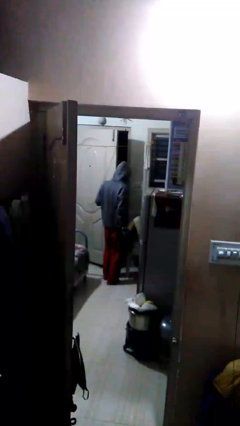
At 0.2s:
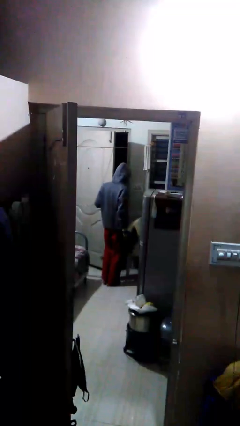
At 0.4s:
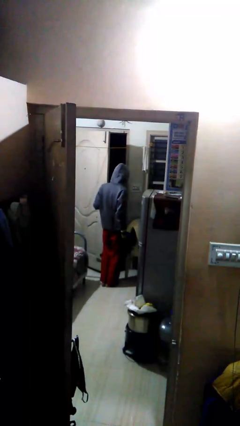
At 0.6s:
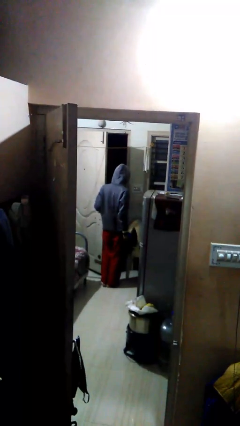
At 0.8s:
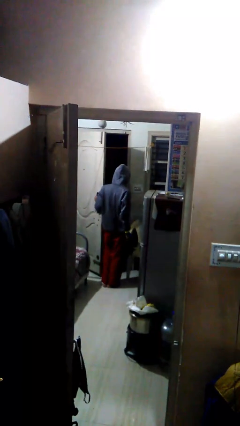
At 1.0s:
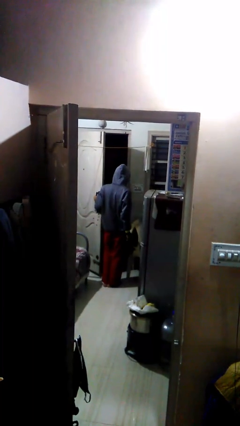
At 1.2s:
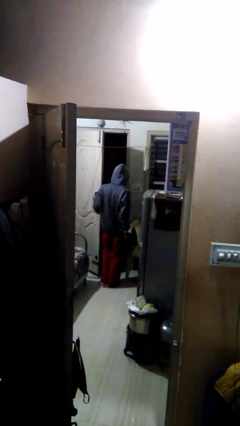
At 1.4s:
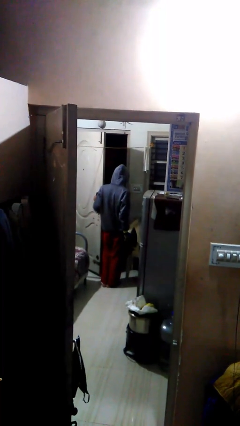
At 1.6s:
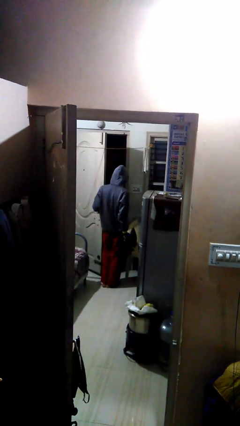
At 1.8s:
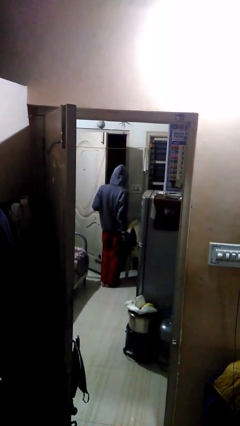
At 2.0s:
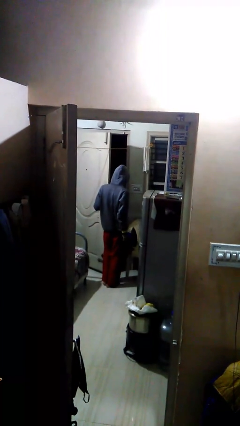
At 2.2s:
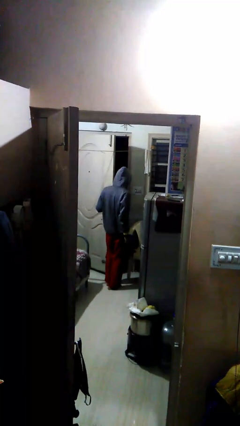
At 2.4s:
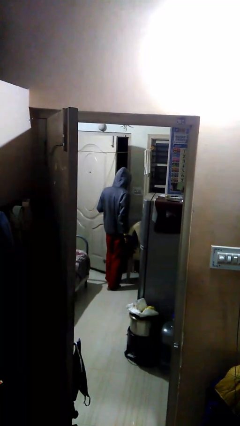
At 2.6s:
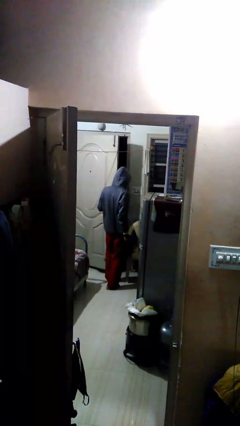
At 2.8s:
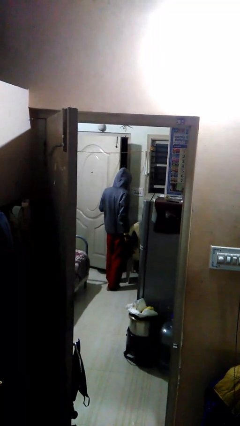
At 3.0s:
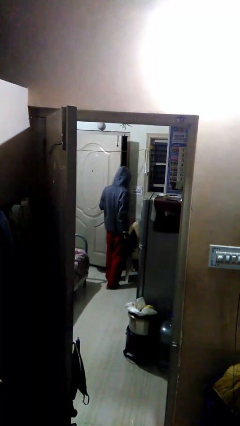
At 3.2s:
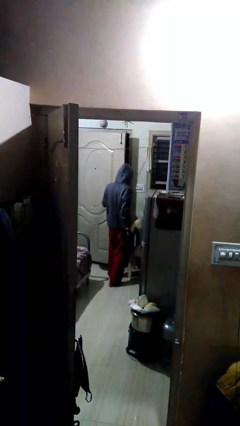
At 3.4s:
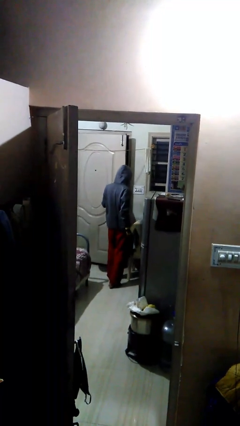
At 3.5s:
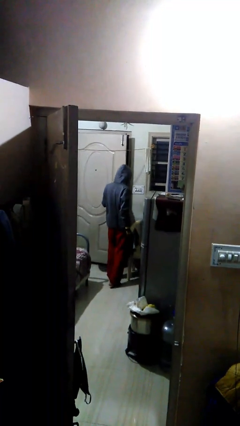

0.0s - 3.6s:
person opens facility door

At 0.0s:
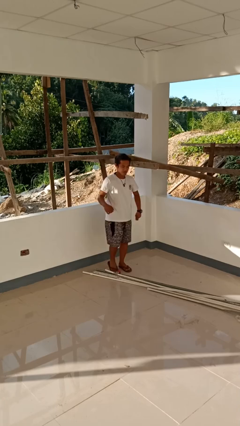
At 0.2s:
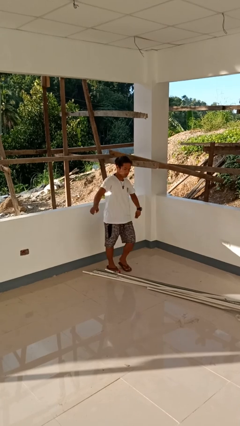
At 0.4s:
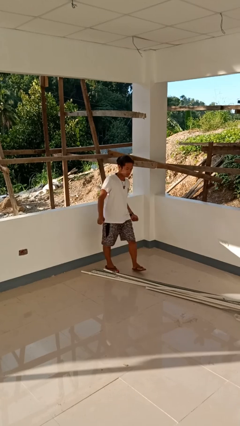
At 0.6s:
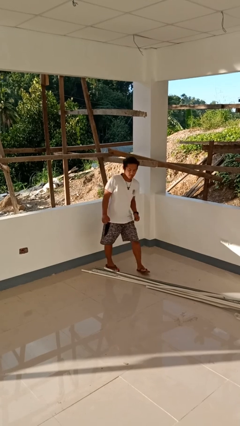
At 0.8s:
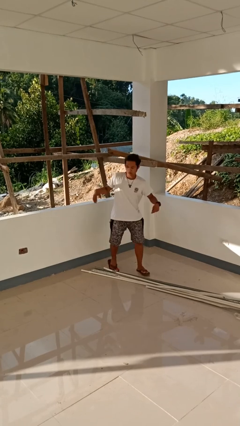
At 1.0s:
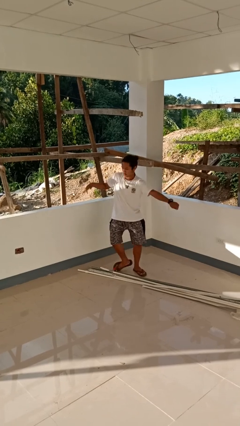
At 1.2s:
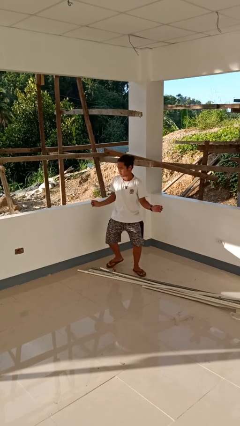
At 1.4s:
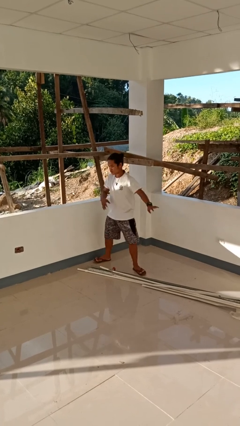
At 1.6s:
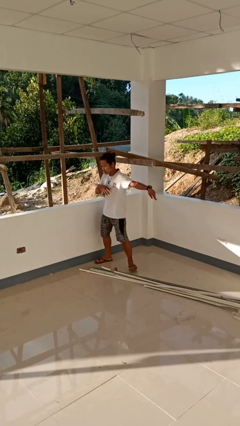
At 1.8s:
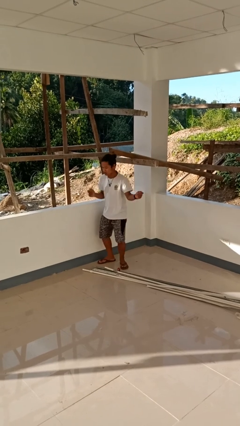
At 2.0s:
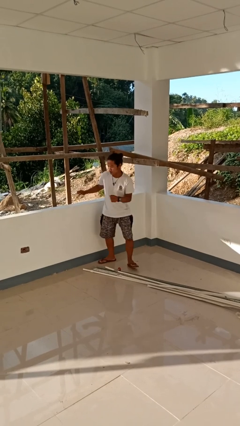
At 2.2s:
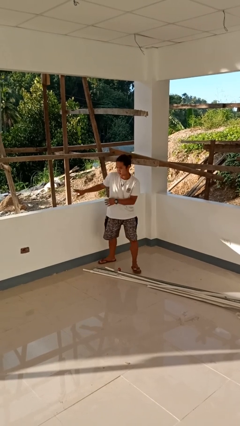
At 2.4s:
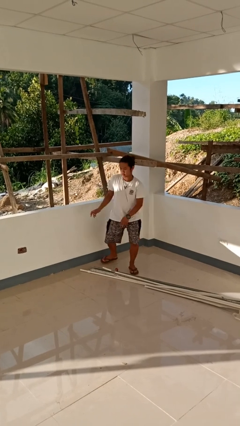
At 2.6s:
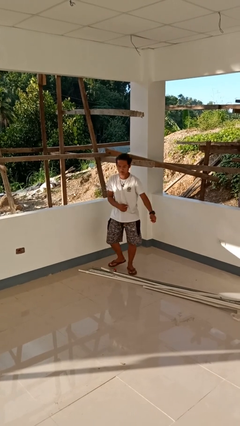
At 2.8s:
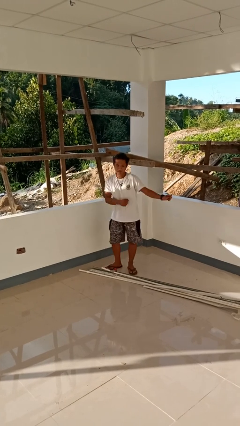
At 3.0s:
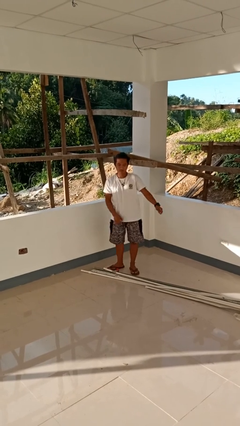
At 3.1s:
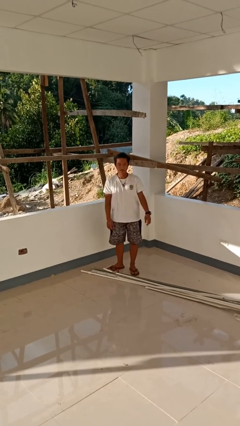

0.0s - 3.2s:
person dances in place

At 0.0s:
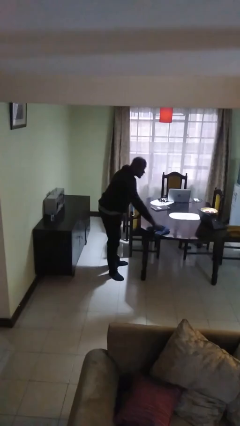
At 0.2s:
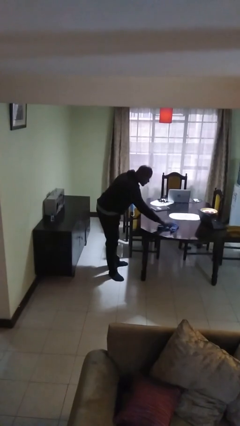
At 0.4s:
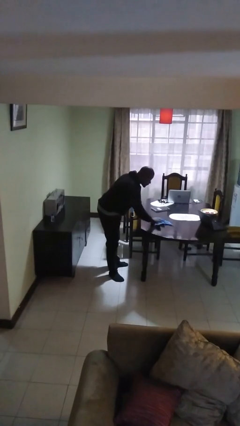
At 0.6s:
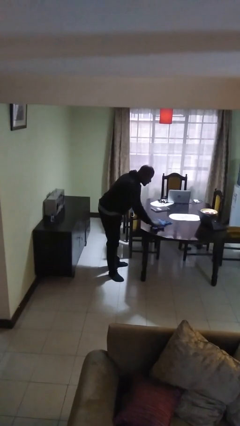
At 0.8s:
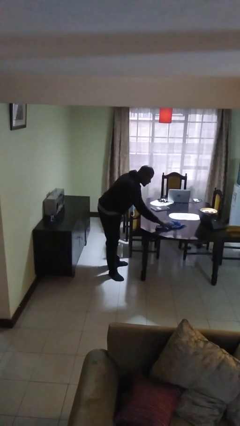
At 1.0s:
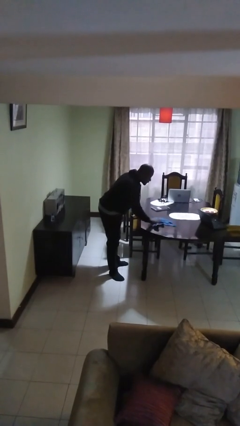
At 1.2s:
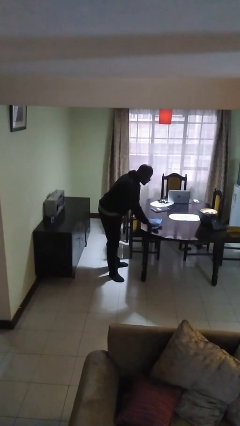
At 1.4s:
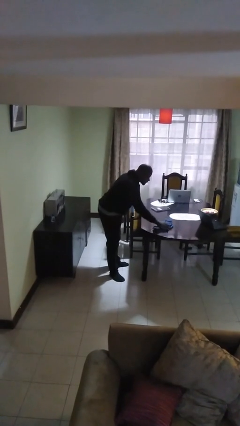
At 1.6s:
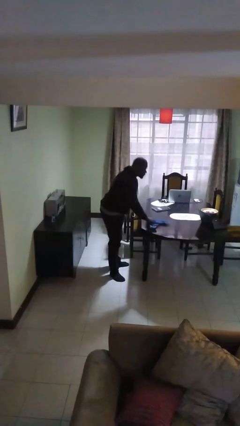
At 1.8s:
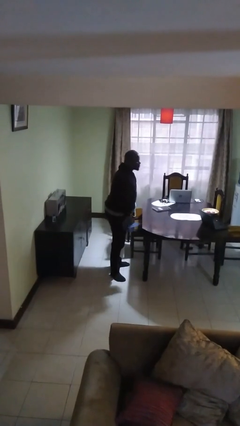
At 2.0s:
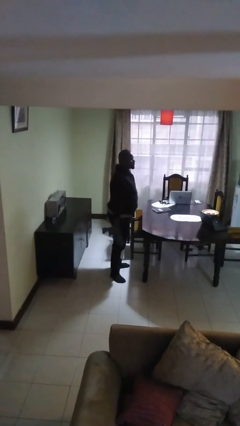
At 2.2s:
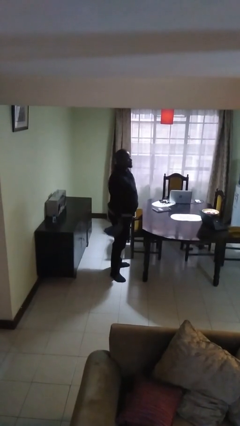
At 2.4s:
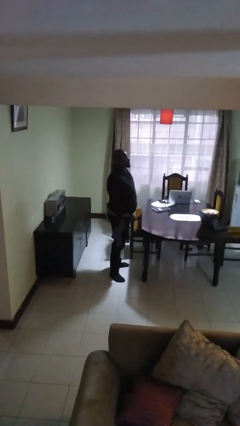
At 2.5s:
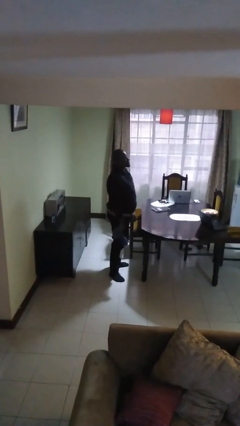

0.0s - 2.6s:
person cleans table with rag

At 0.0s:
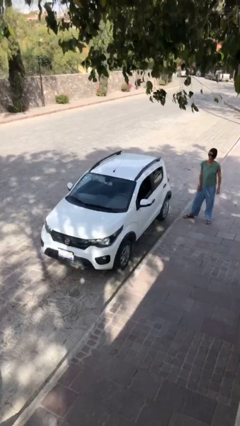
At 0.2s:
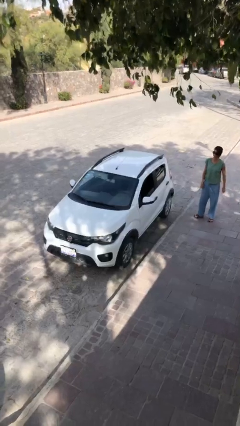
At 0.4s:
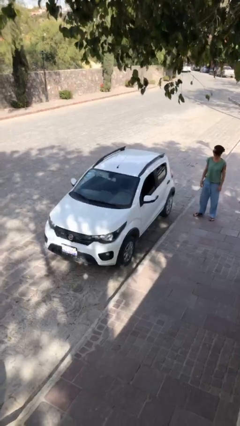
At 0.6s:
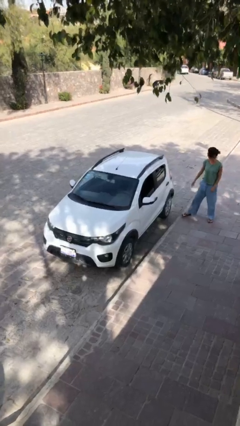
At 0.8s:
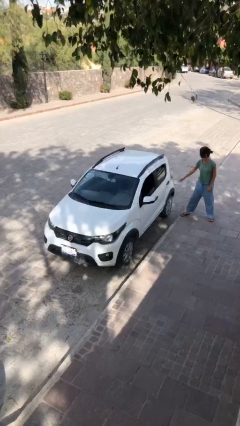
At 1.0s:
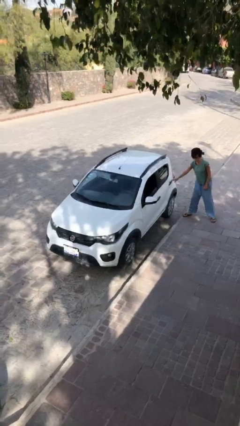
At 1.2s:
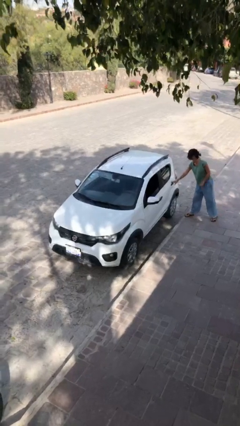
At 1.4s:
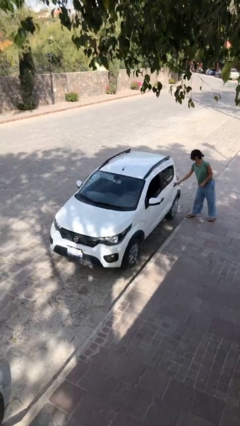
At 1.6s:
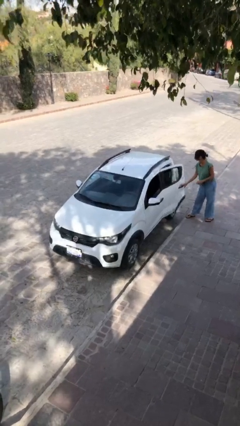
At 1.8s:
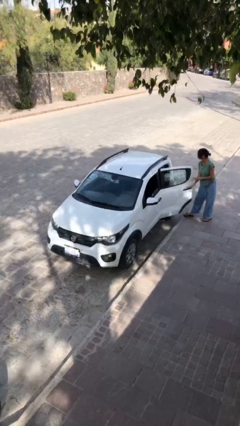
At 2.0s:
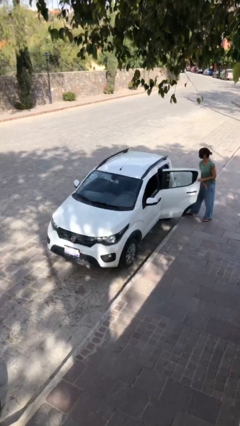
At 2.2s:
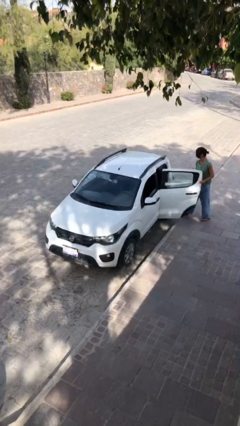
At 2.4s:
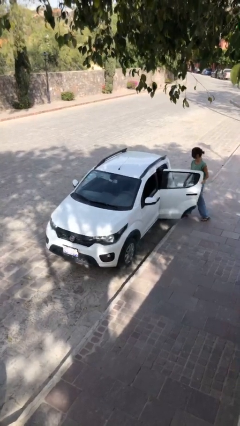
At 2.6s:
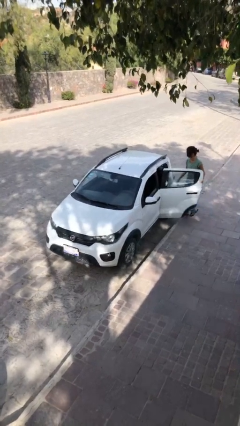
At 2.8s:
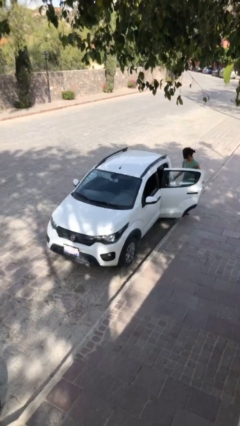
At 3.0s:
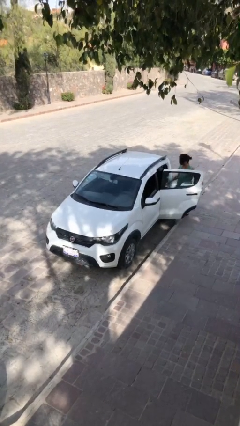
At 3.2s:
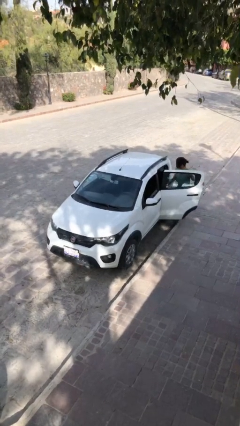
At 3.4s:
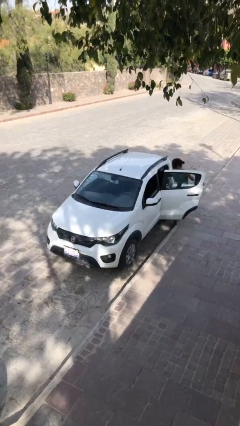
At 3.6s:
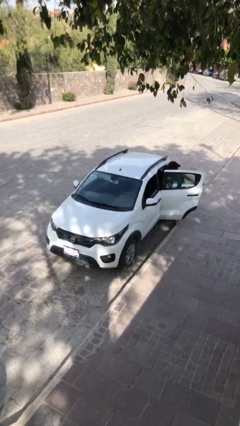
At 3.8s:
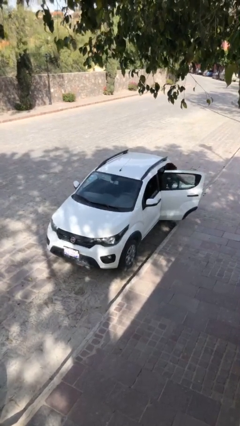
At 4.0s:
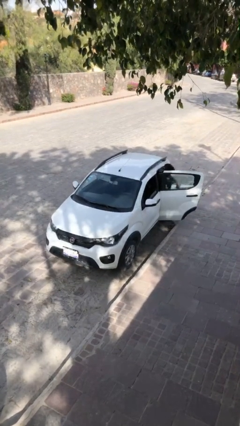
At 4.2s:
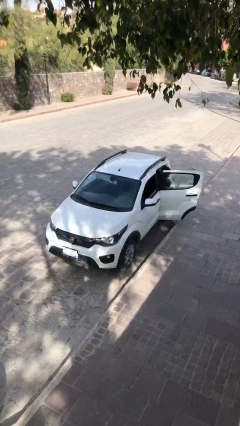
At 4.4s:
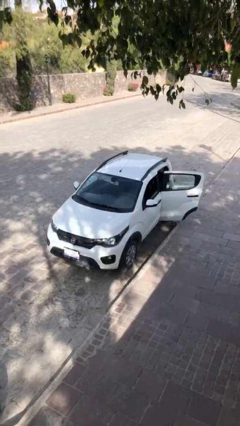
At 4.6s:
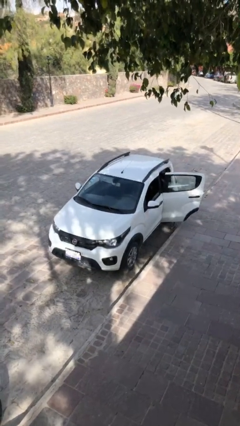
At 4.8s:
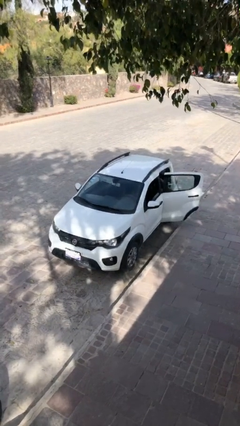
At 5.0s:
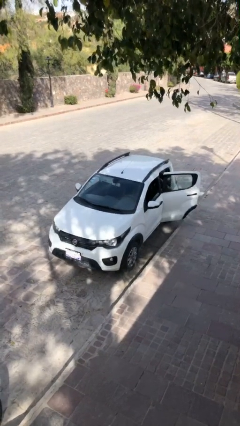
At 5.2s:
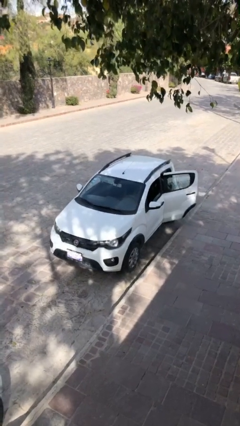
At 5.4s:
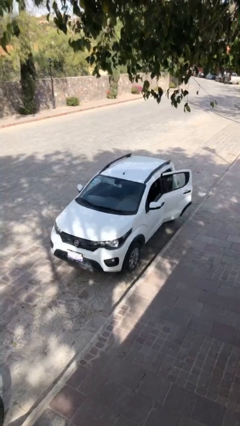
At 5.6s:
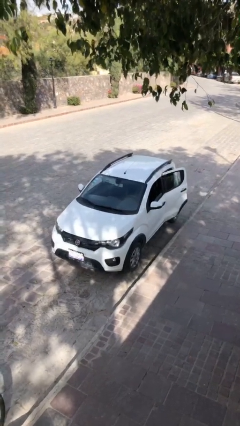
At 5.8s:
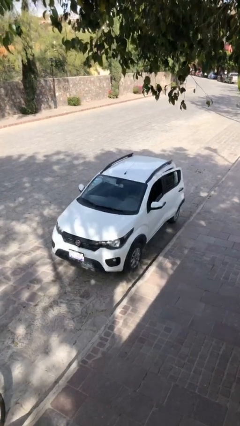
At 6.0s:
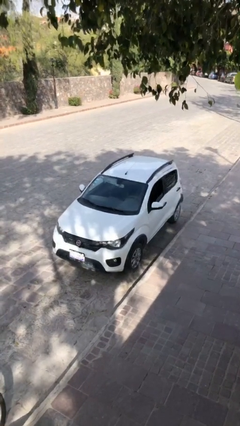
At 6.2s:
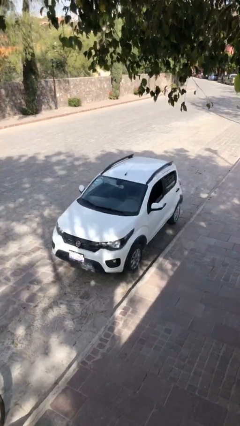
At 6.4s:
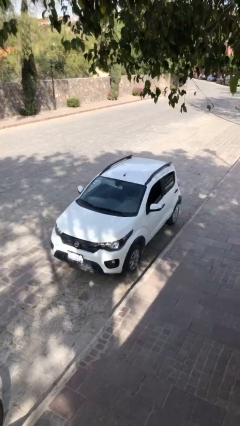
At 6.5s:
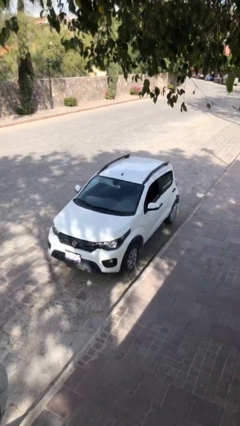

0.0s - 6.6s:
car picks up person

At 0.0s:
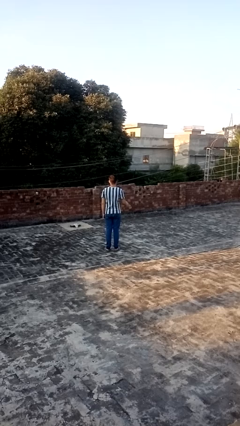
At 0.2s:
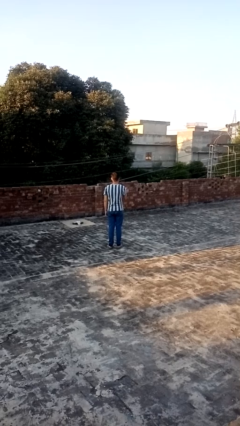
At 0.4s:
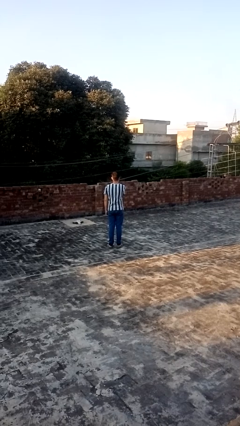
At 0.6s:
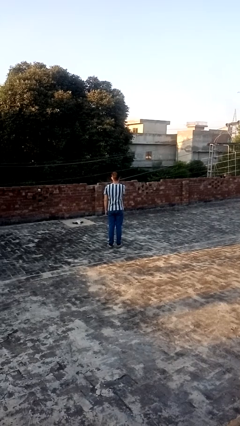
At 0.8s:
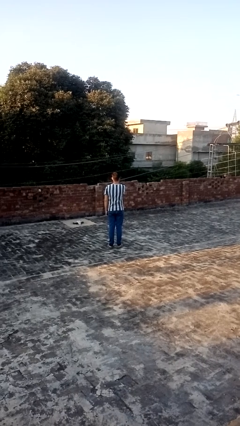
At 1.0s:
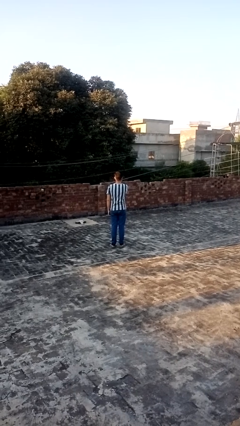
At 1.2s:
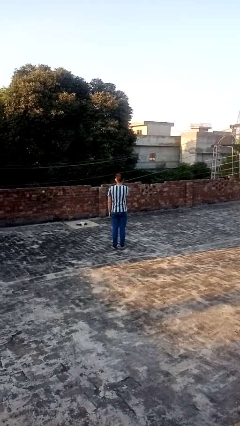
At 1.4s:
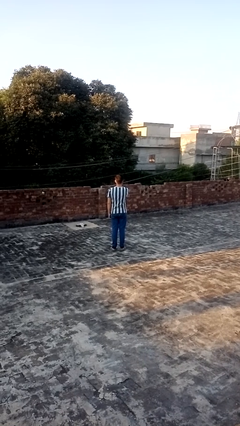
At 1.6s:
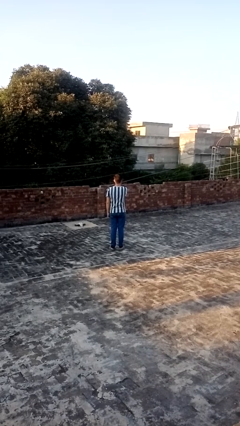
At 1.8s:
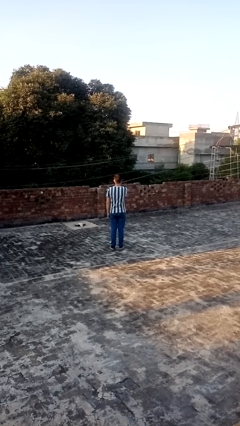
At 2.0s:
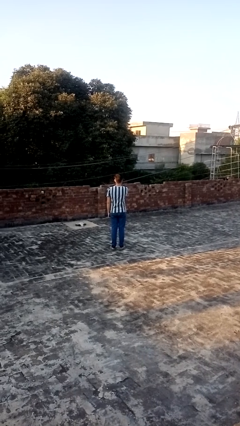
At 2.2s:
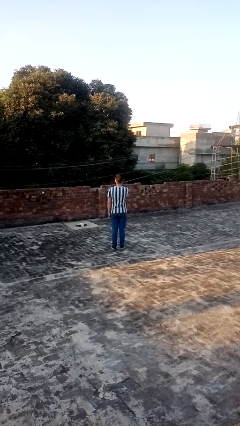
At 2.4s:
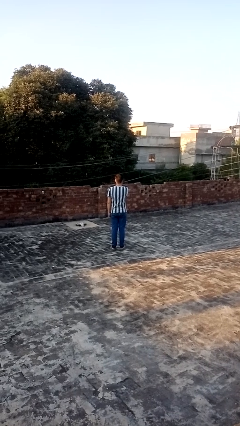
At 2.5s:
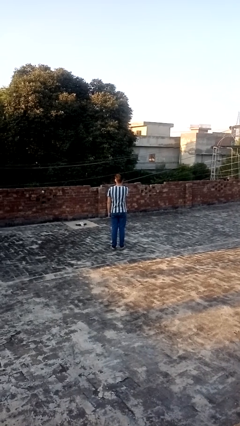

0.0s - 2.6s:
person gestures swipe left
